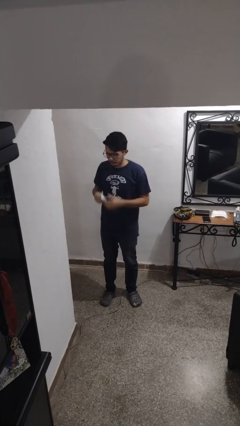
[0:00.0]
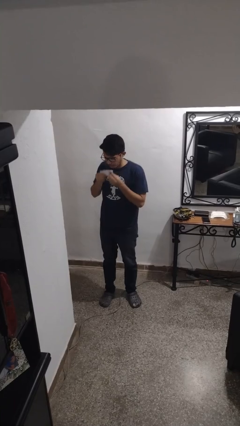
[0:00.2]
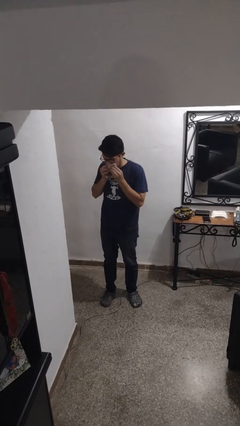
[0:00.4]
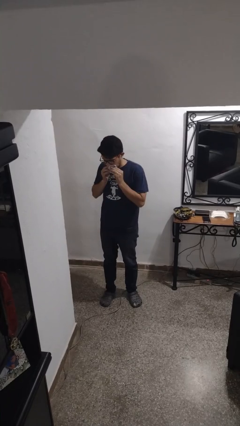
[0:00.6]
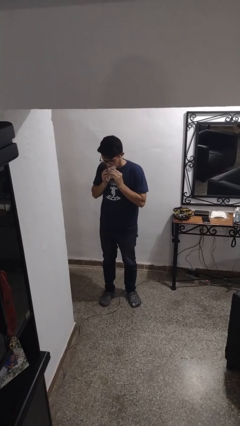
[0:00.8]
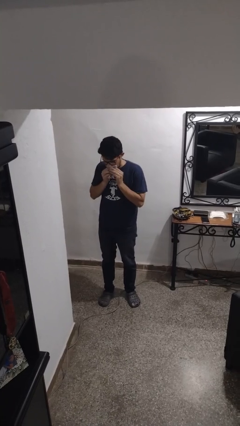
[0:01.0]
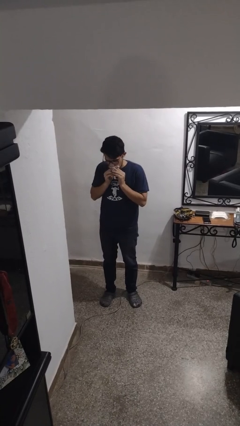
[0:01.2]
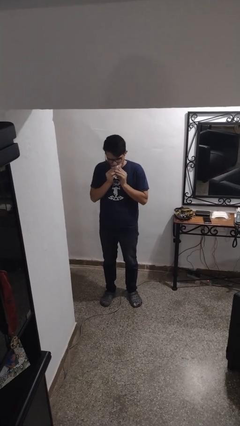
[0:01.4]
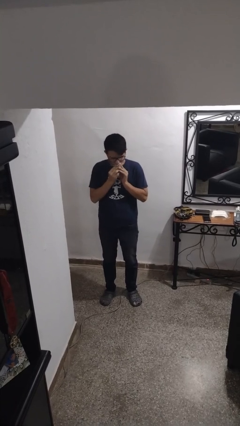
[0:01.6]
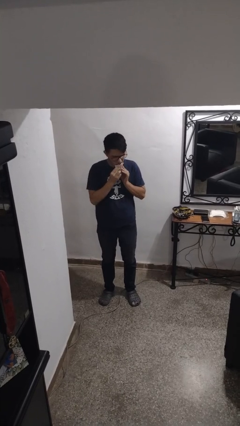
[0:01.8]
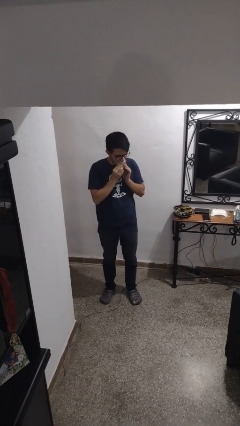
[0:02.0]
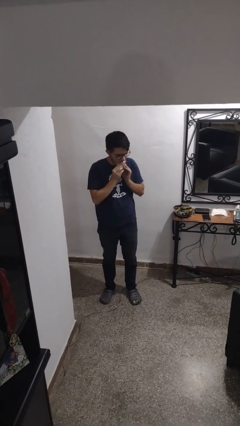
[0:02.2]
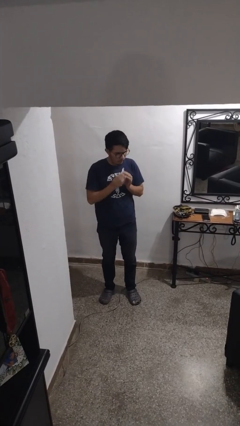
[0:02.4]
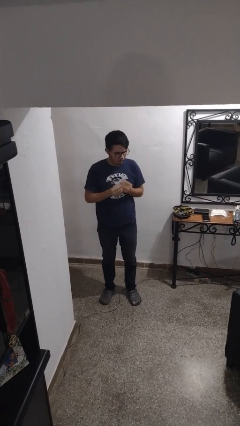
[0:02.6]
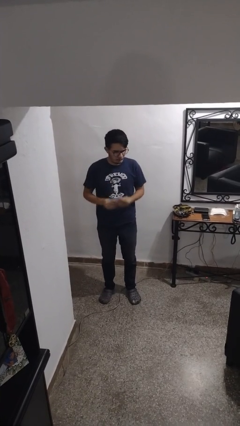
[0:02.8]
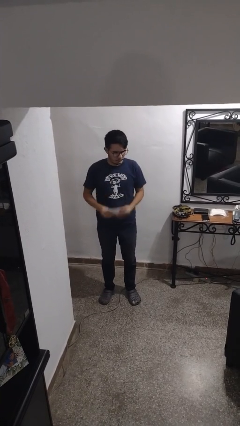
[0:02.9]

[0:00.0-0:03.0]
person wipes mouth with napkin

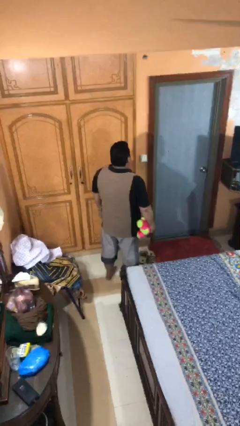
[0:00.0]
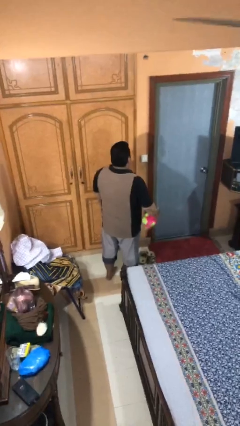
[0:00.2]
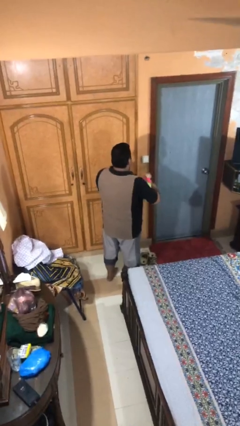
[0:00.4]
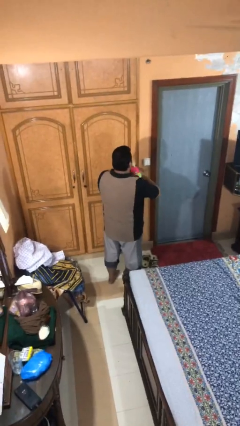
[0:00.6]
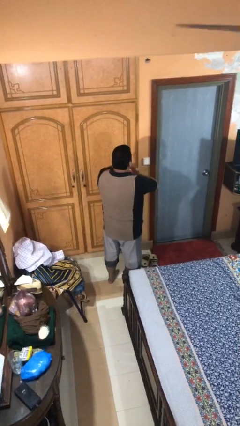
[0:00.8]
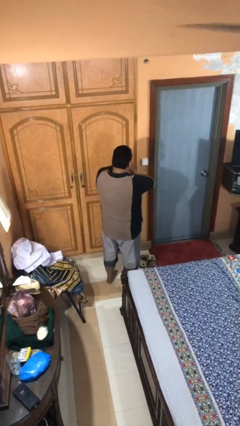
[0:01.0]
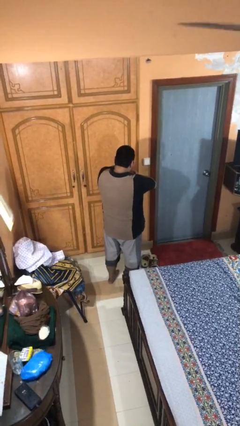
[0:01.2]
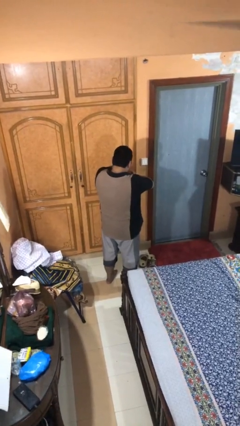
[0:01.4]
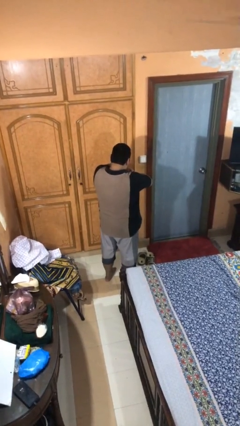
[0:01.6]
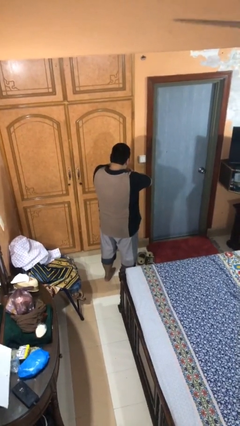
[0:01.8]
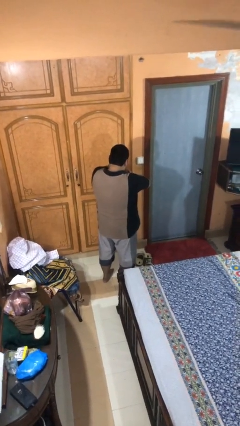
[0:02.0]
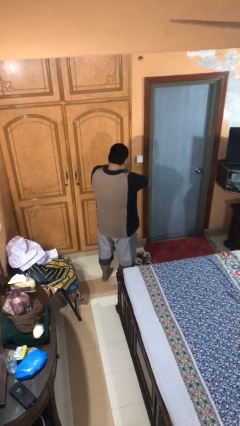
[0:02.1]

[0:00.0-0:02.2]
person hugs stuffed animal

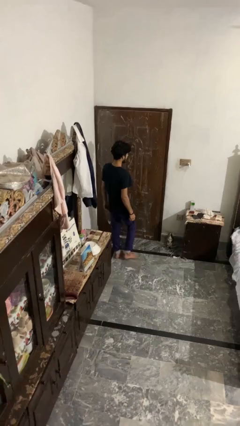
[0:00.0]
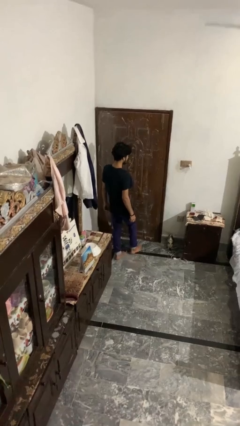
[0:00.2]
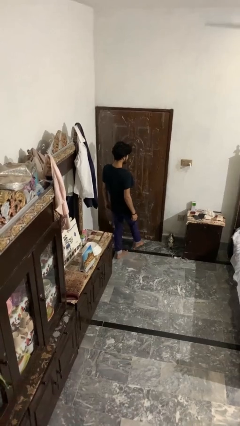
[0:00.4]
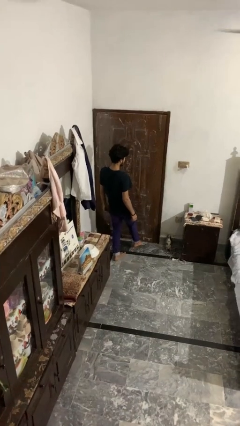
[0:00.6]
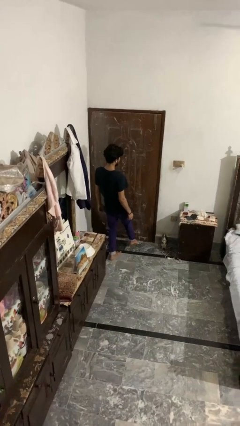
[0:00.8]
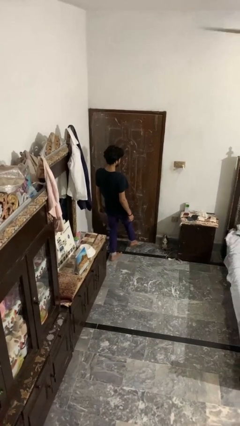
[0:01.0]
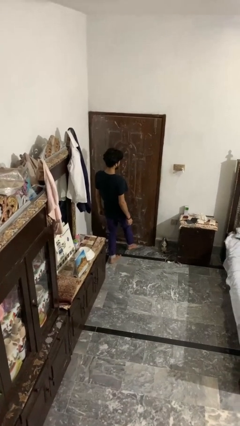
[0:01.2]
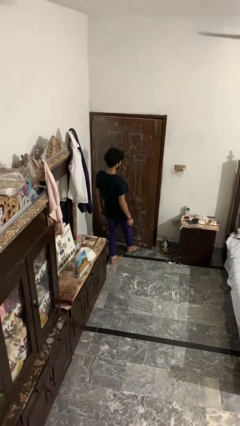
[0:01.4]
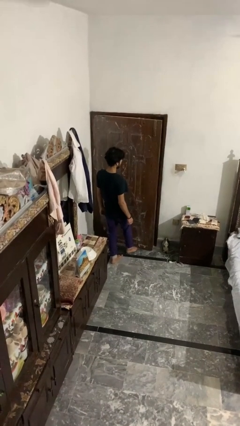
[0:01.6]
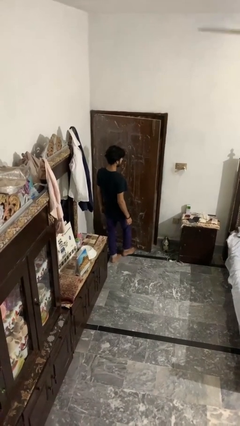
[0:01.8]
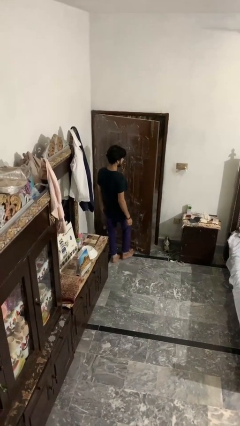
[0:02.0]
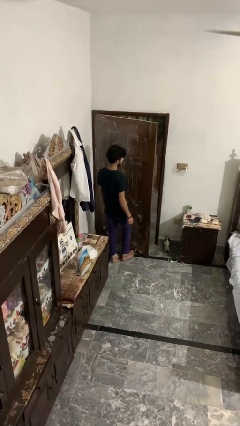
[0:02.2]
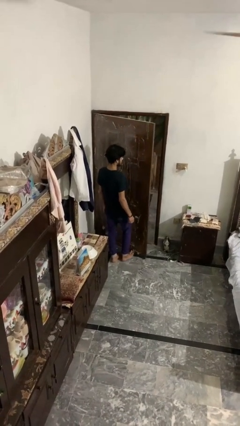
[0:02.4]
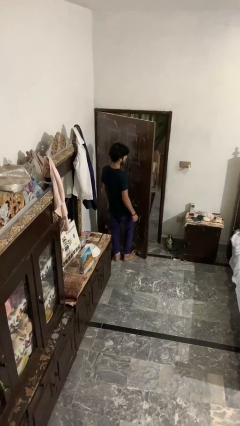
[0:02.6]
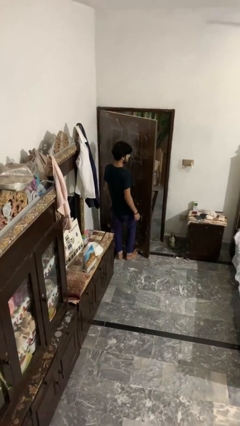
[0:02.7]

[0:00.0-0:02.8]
person opens facility door

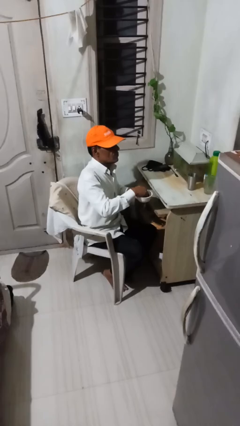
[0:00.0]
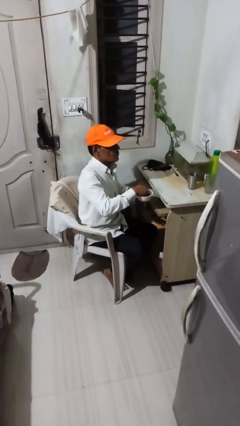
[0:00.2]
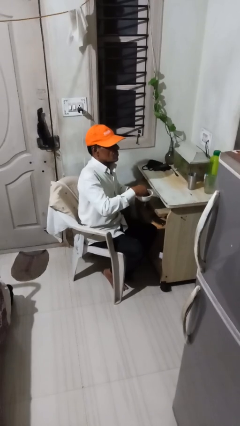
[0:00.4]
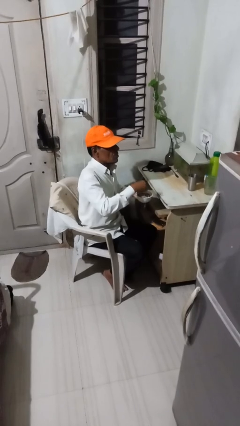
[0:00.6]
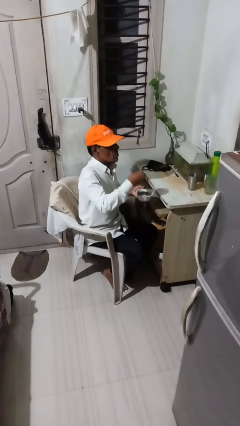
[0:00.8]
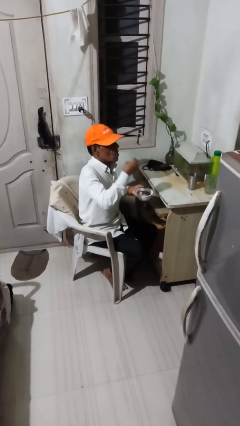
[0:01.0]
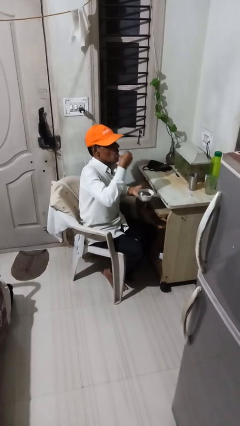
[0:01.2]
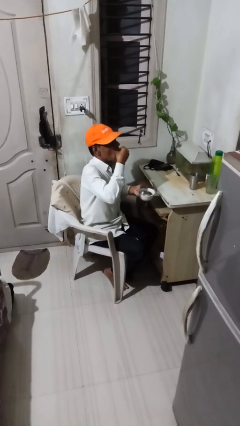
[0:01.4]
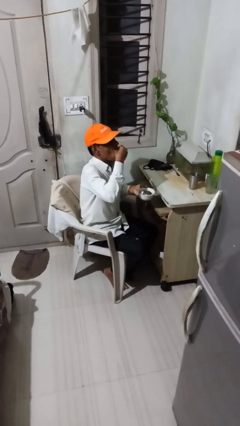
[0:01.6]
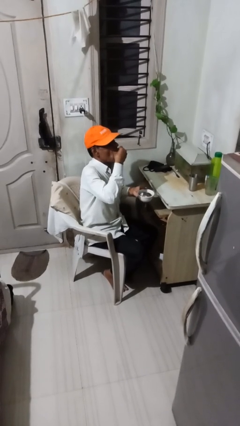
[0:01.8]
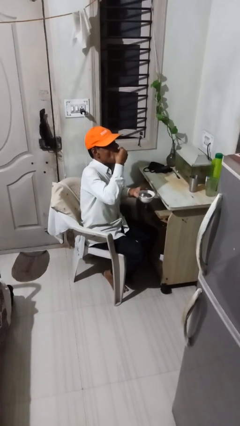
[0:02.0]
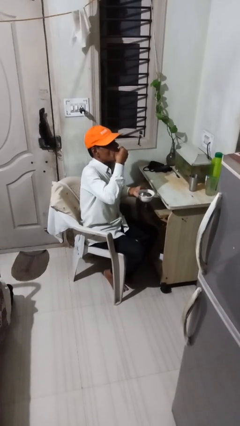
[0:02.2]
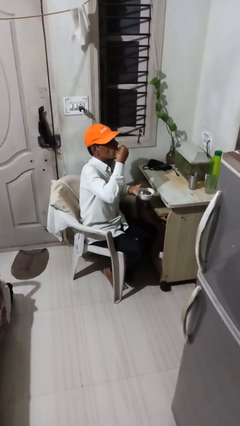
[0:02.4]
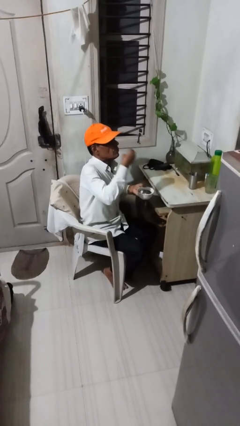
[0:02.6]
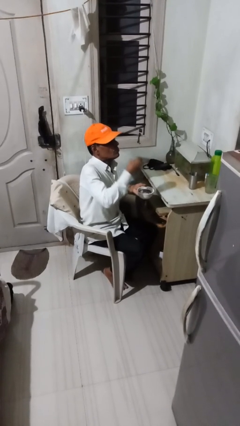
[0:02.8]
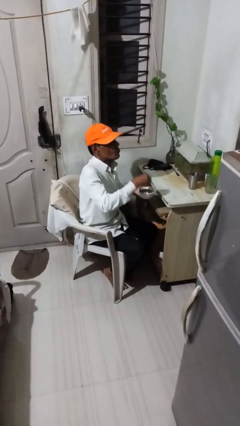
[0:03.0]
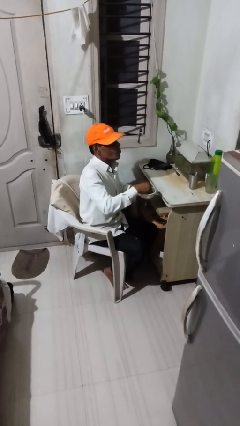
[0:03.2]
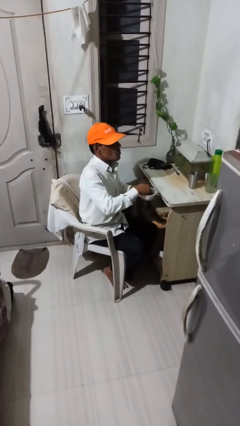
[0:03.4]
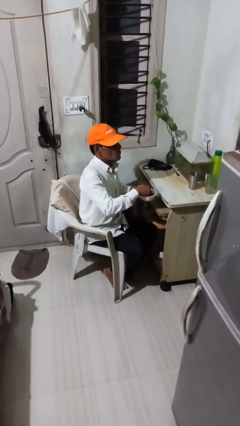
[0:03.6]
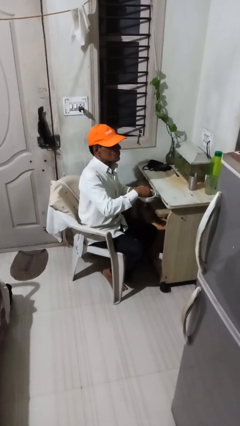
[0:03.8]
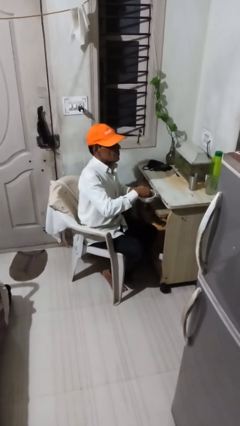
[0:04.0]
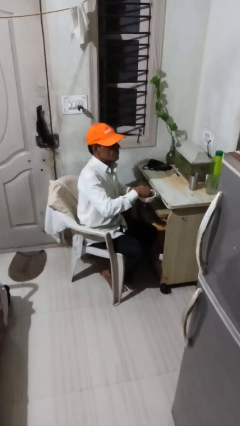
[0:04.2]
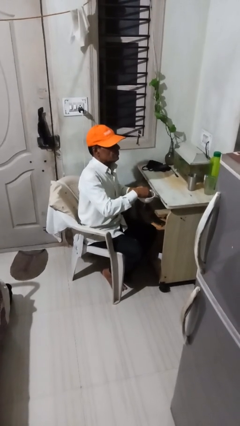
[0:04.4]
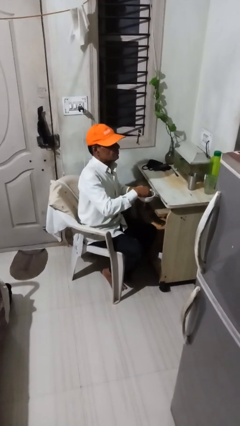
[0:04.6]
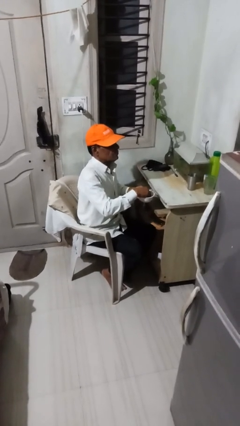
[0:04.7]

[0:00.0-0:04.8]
person eats with hands

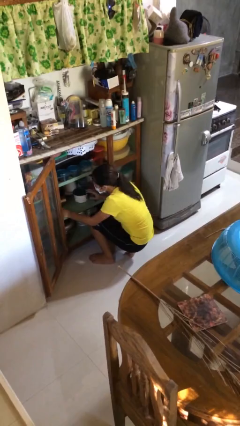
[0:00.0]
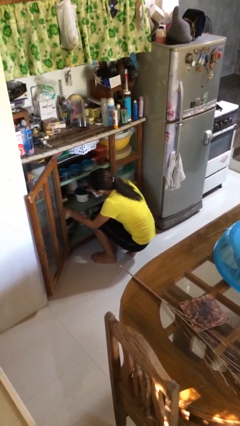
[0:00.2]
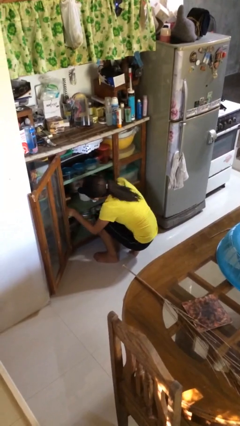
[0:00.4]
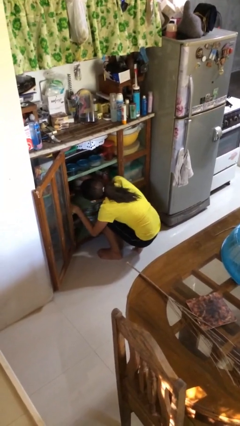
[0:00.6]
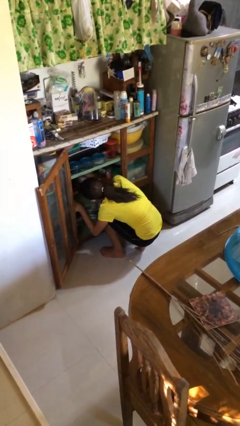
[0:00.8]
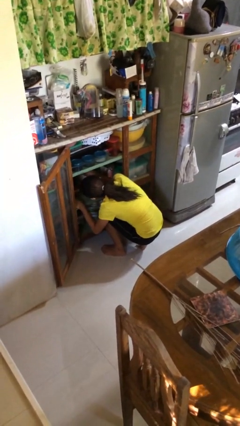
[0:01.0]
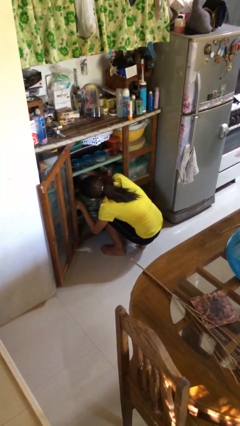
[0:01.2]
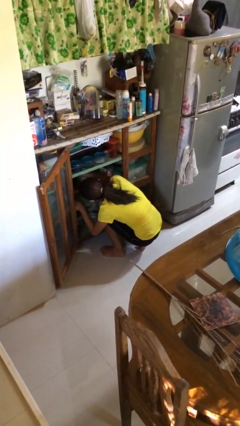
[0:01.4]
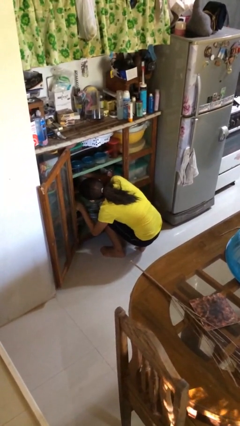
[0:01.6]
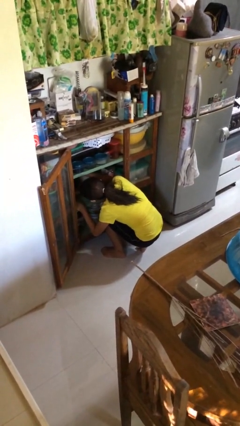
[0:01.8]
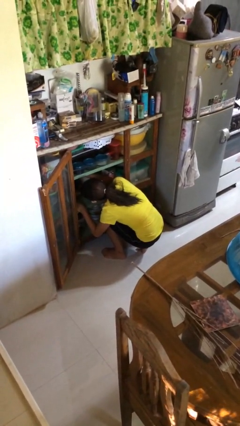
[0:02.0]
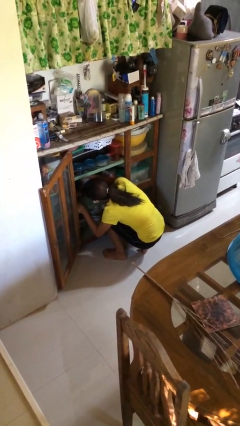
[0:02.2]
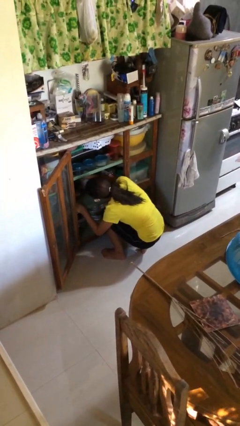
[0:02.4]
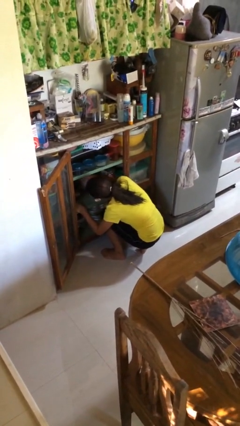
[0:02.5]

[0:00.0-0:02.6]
person searches in cabinet

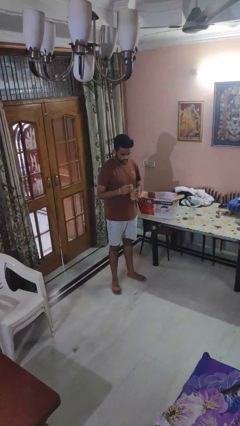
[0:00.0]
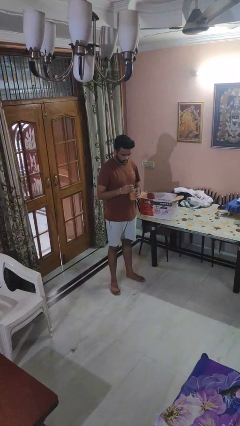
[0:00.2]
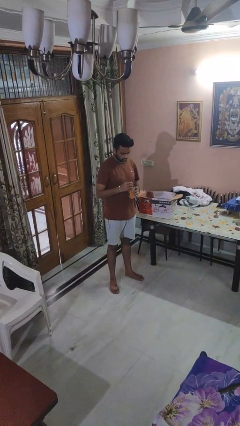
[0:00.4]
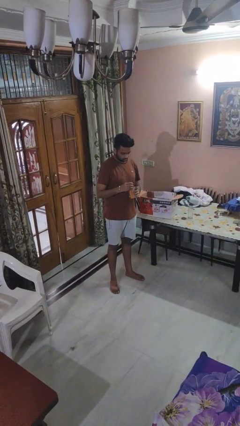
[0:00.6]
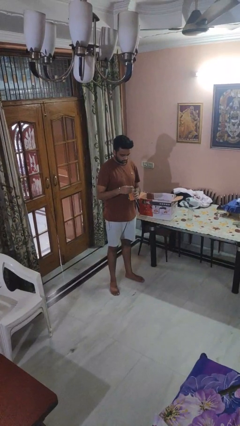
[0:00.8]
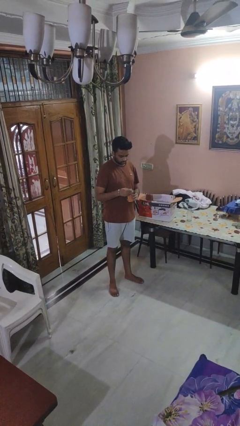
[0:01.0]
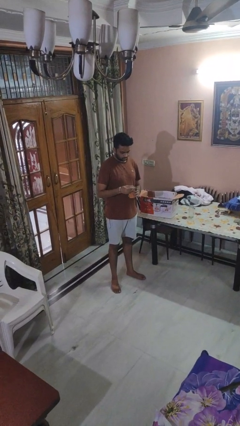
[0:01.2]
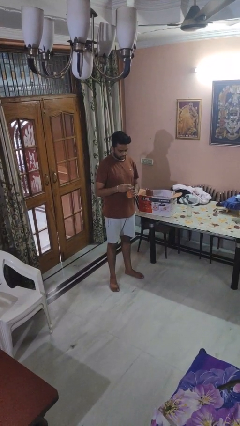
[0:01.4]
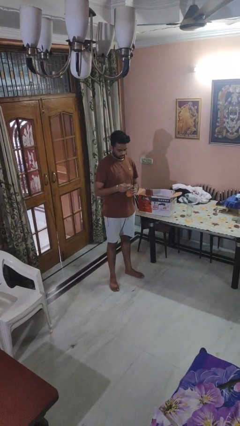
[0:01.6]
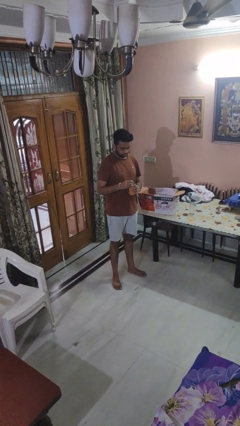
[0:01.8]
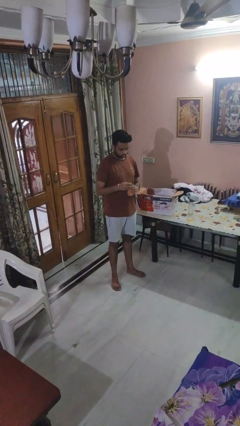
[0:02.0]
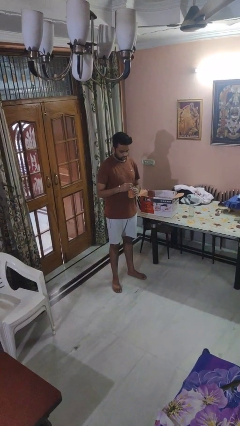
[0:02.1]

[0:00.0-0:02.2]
person opens can with can opener
